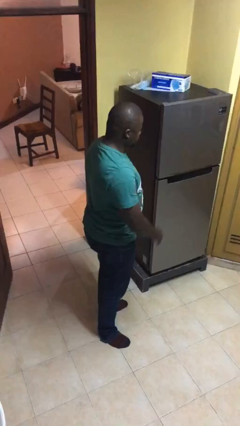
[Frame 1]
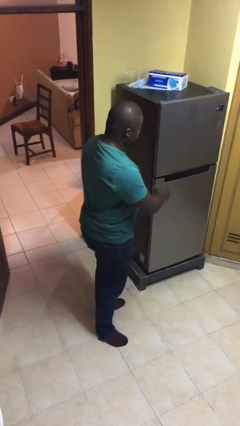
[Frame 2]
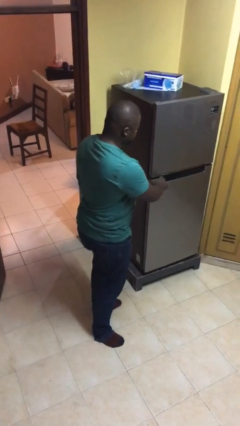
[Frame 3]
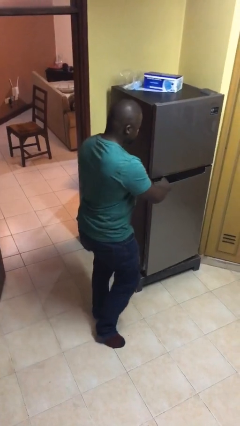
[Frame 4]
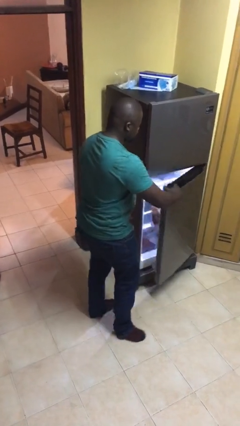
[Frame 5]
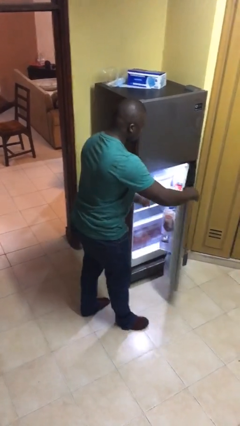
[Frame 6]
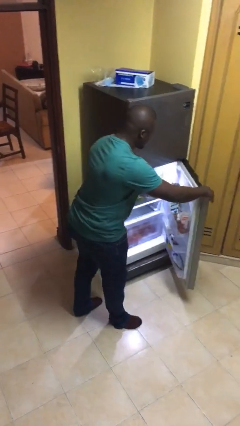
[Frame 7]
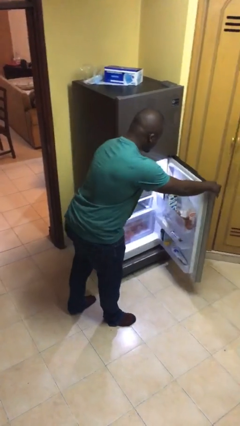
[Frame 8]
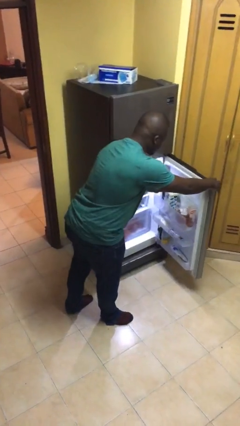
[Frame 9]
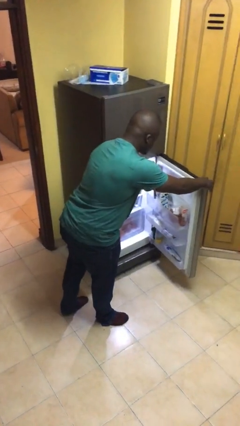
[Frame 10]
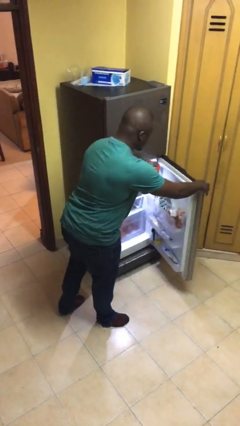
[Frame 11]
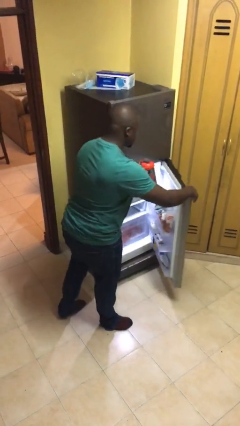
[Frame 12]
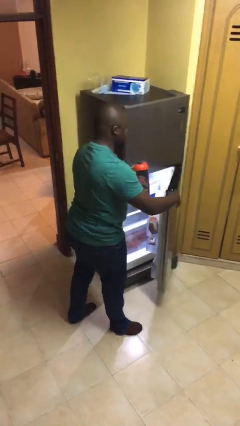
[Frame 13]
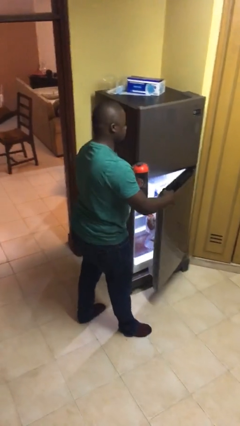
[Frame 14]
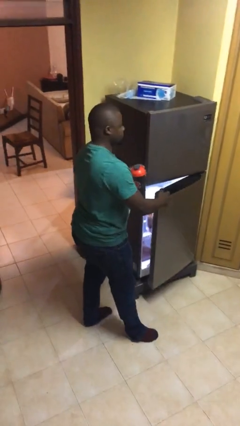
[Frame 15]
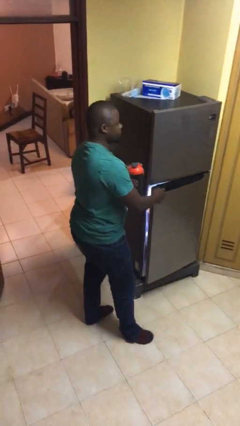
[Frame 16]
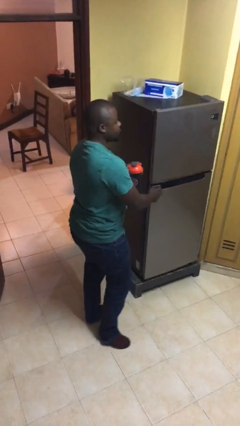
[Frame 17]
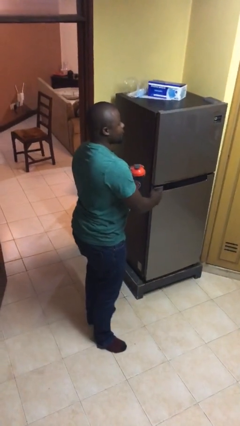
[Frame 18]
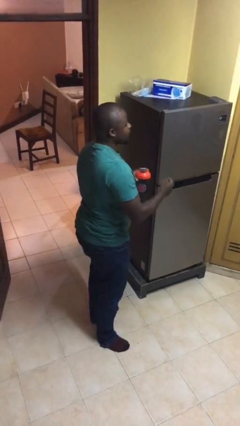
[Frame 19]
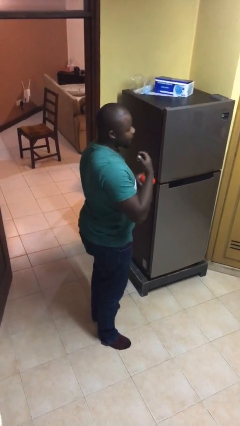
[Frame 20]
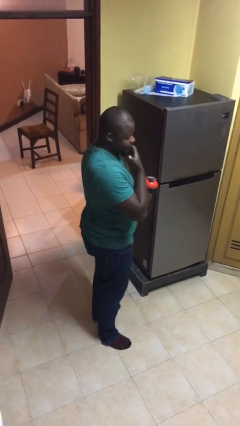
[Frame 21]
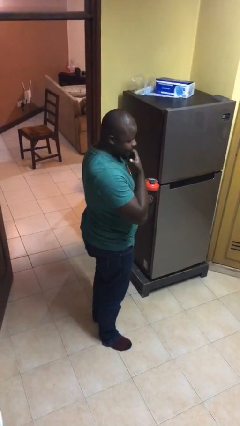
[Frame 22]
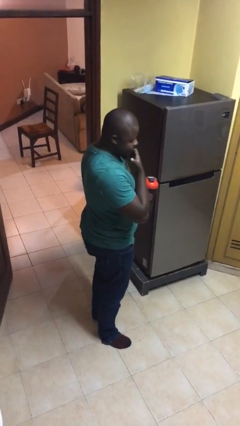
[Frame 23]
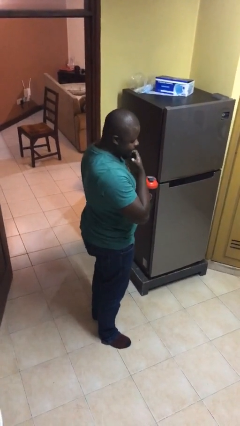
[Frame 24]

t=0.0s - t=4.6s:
person takes object from refrigerator

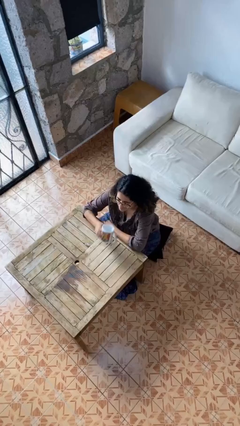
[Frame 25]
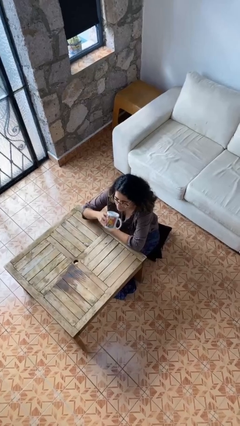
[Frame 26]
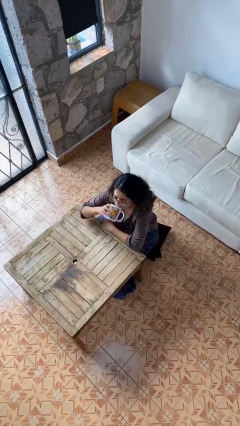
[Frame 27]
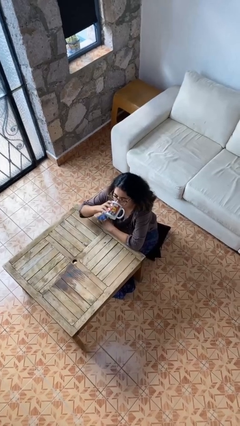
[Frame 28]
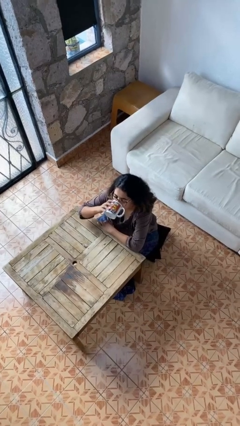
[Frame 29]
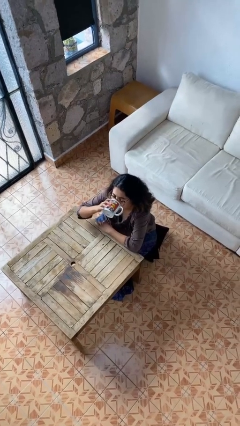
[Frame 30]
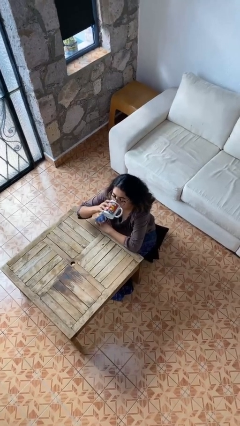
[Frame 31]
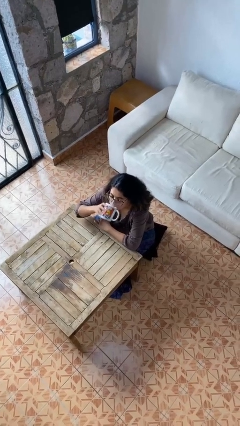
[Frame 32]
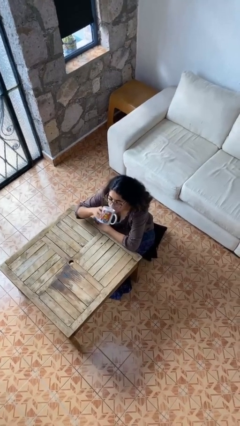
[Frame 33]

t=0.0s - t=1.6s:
person drinks from mug

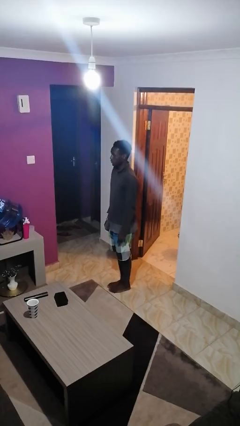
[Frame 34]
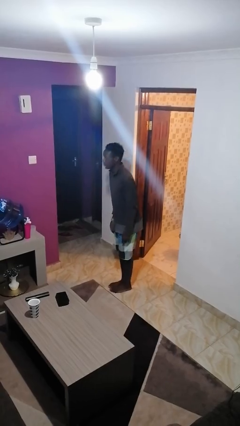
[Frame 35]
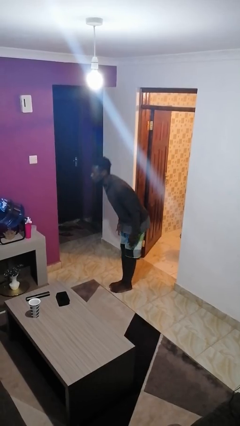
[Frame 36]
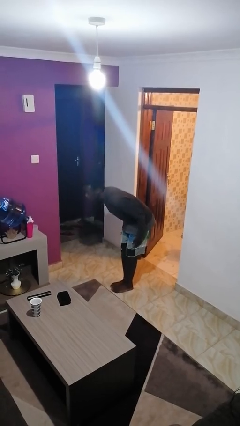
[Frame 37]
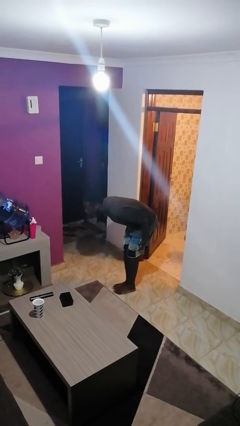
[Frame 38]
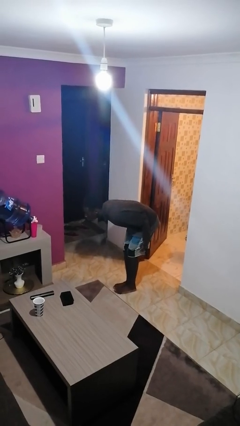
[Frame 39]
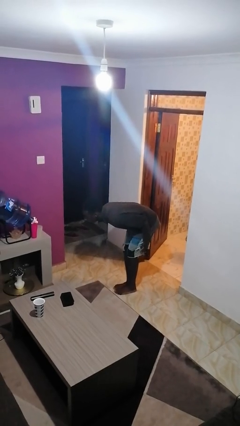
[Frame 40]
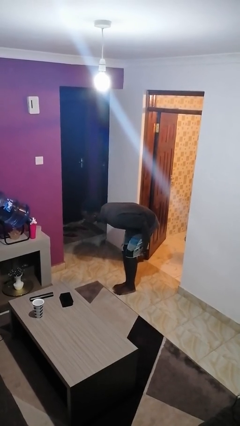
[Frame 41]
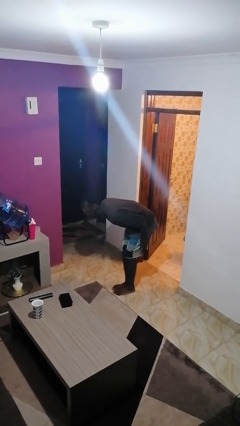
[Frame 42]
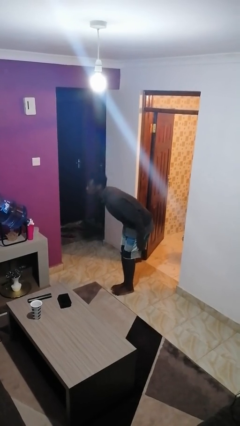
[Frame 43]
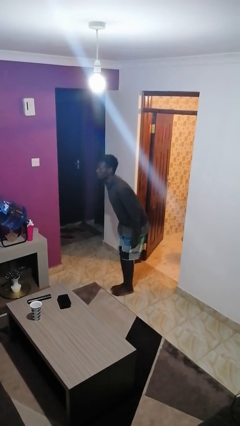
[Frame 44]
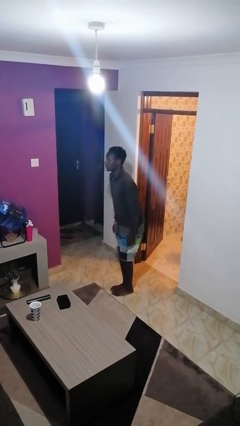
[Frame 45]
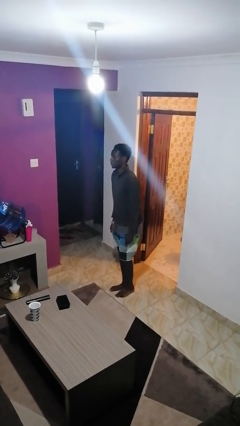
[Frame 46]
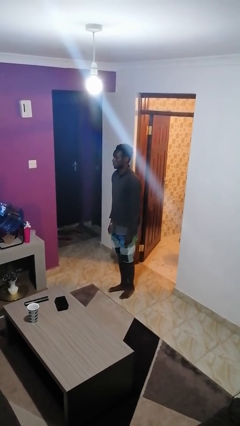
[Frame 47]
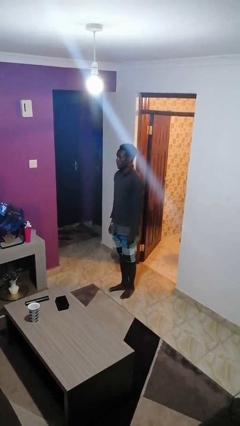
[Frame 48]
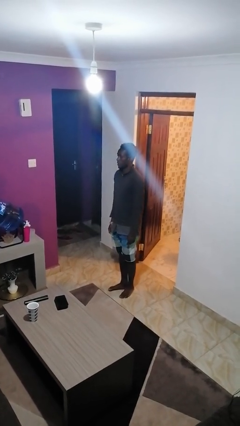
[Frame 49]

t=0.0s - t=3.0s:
person bows

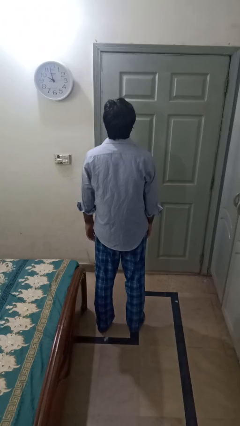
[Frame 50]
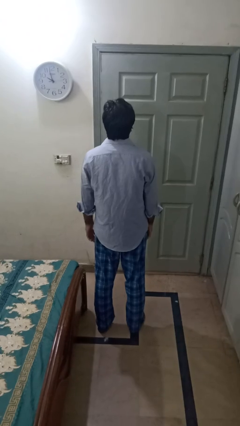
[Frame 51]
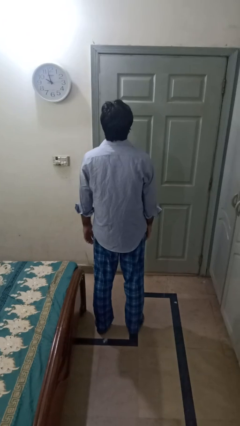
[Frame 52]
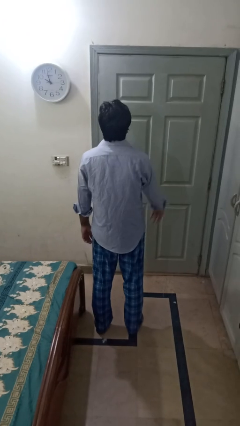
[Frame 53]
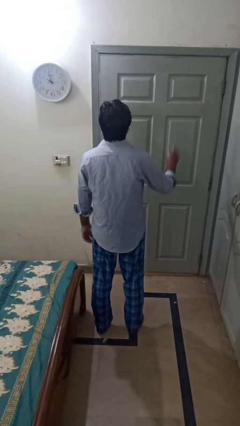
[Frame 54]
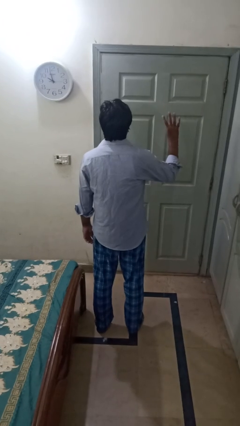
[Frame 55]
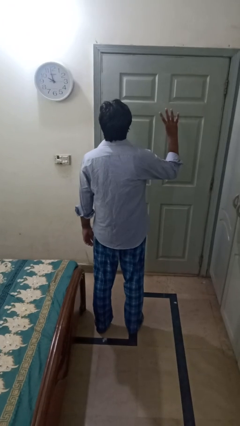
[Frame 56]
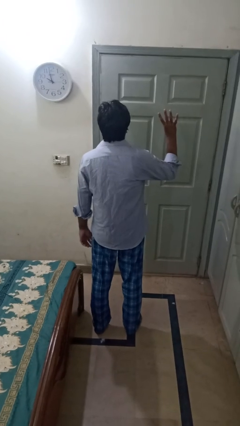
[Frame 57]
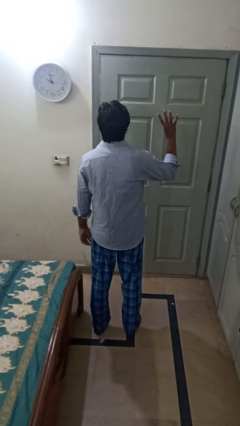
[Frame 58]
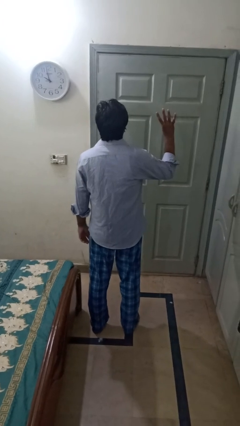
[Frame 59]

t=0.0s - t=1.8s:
person gestures number four

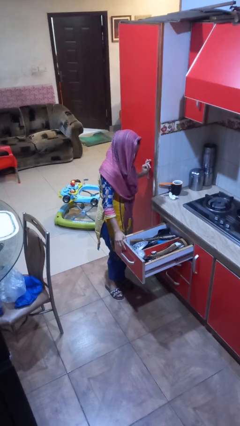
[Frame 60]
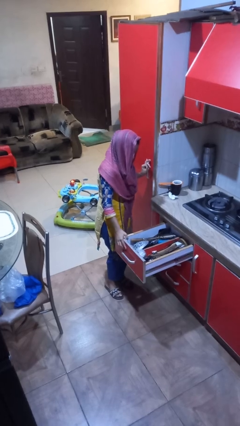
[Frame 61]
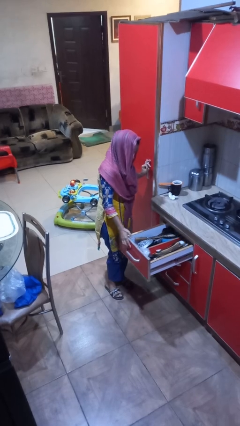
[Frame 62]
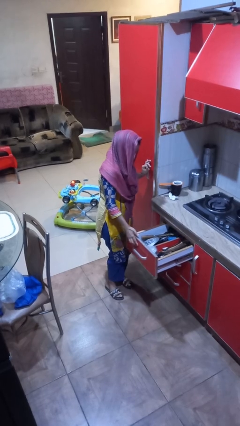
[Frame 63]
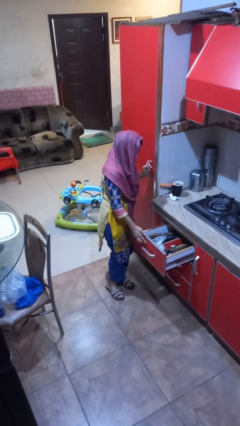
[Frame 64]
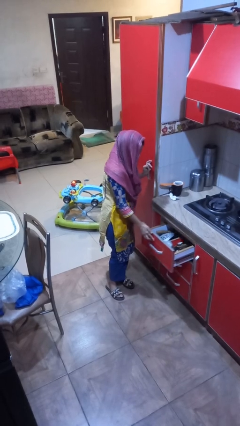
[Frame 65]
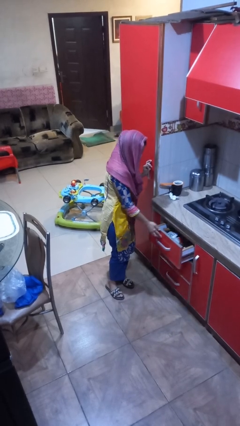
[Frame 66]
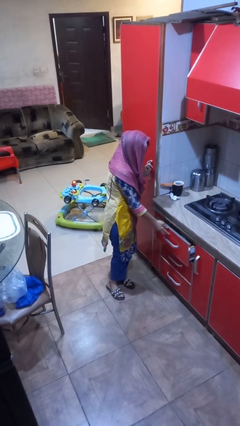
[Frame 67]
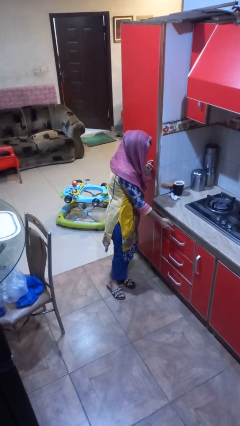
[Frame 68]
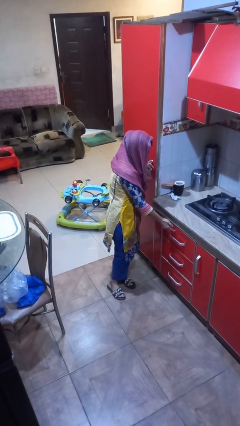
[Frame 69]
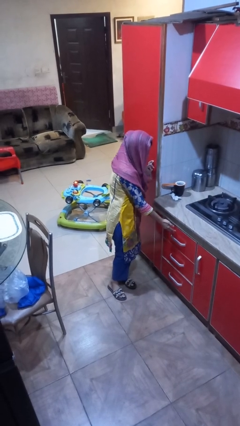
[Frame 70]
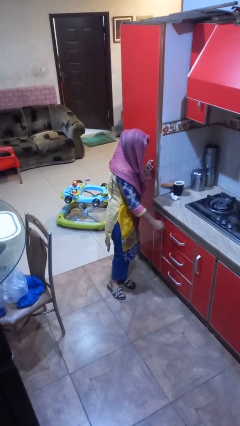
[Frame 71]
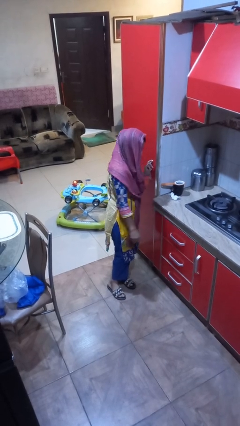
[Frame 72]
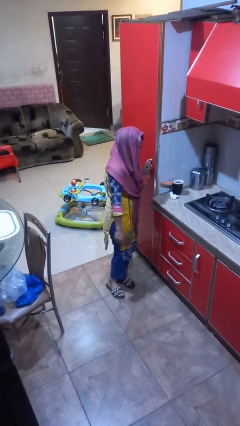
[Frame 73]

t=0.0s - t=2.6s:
person closes kitchen drawer

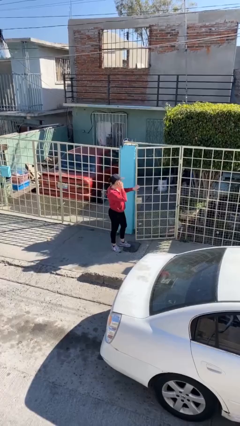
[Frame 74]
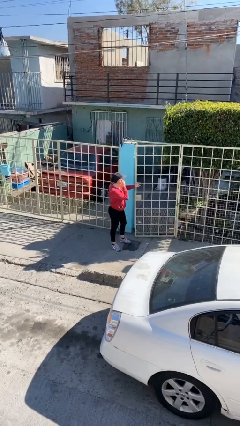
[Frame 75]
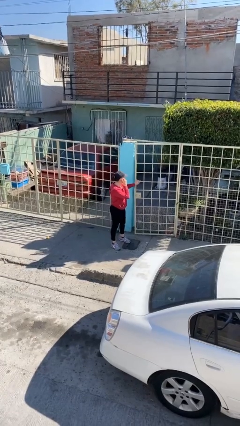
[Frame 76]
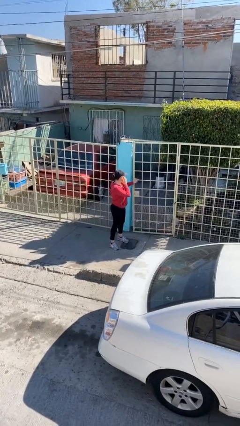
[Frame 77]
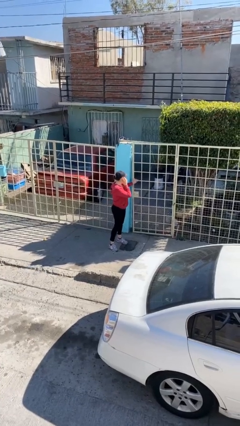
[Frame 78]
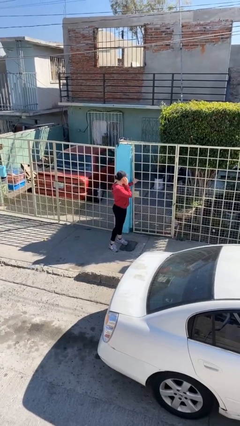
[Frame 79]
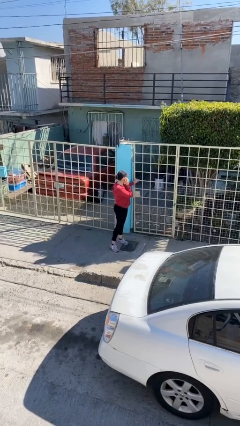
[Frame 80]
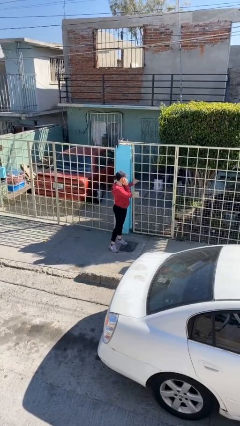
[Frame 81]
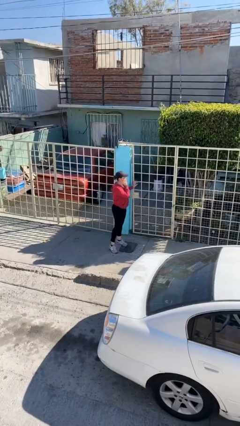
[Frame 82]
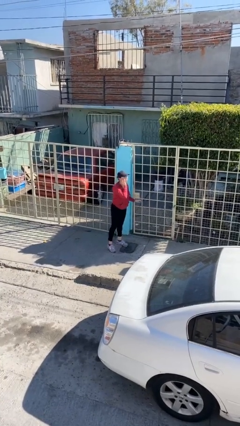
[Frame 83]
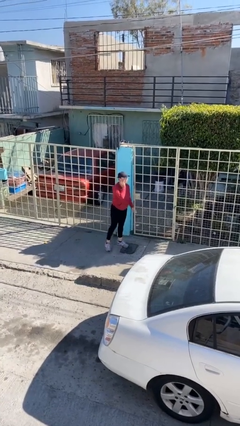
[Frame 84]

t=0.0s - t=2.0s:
person closes facility door

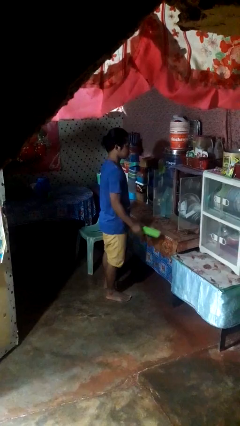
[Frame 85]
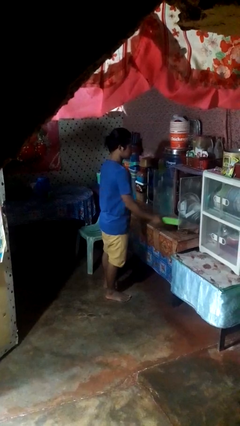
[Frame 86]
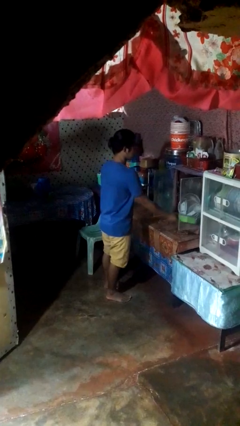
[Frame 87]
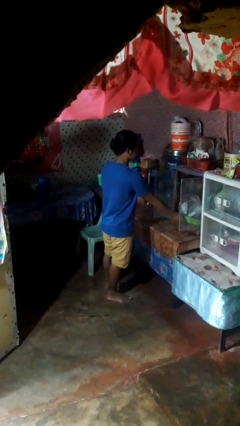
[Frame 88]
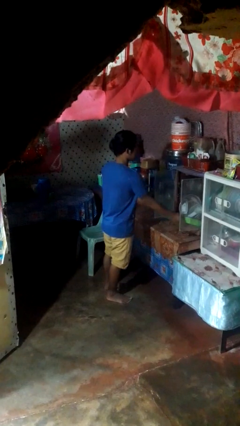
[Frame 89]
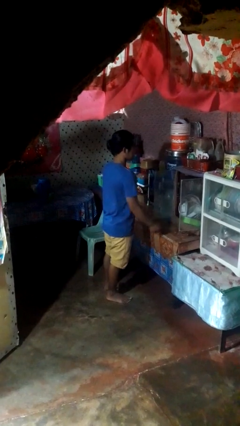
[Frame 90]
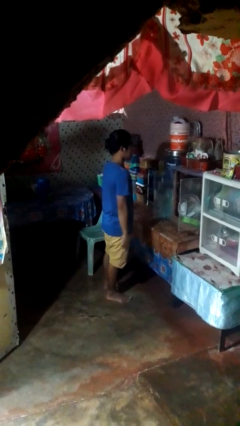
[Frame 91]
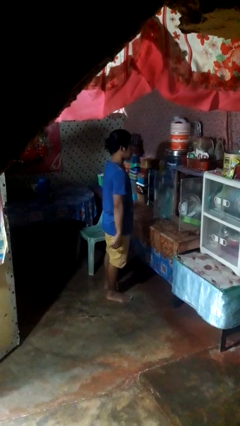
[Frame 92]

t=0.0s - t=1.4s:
person puts down object into cabinet
